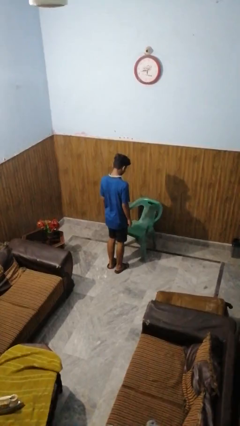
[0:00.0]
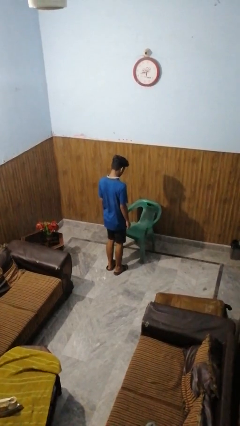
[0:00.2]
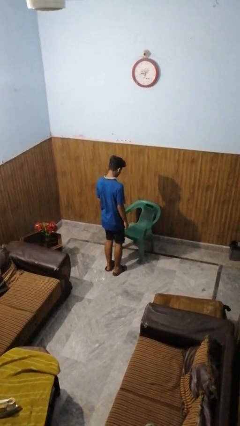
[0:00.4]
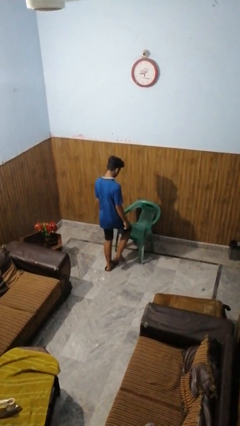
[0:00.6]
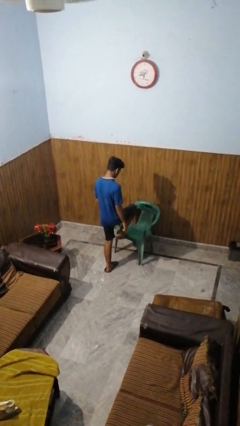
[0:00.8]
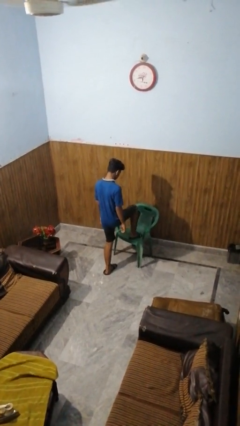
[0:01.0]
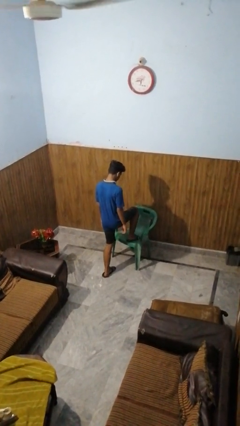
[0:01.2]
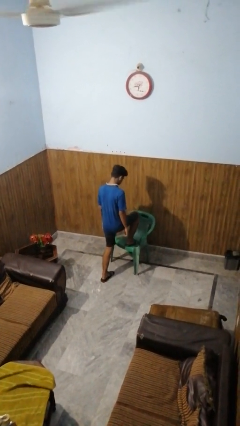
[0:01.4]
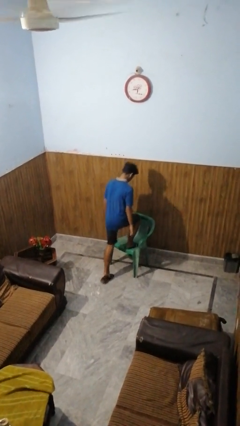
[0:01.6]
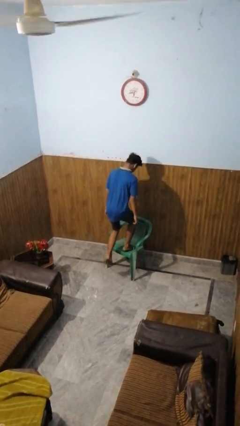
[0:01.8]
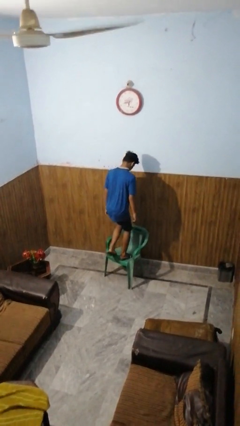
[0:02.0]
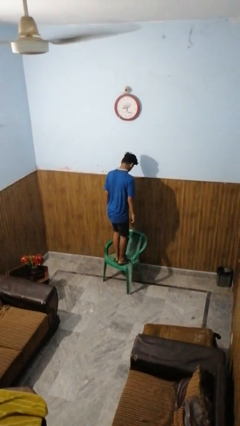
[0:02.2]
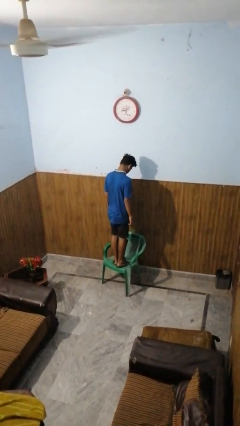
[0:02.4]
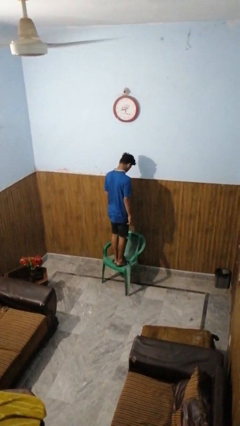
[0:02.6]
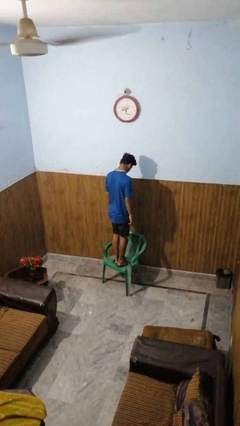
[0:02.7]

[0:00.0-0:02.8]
person climbs on chair

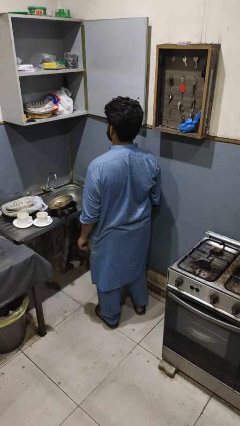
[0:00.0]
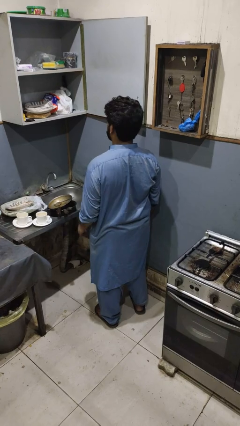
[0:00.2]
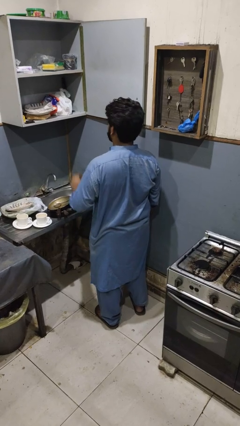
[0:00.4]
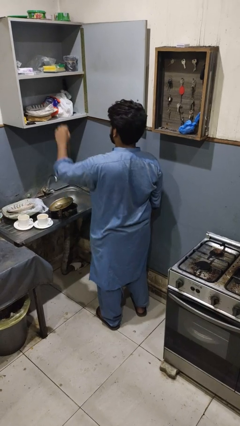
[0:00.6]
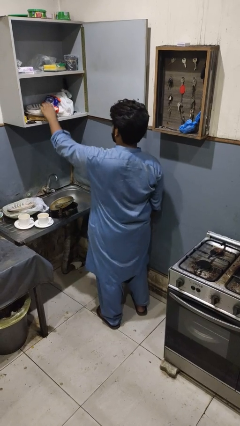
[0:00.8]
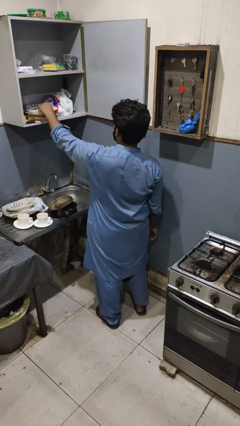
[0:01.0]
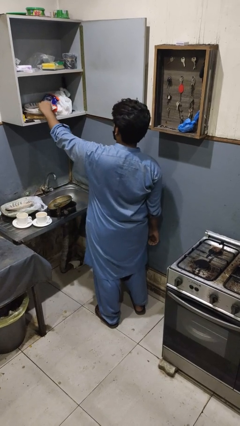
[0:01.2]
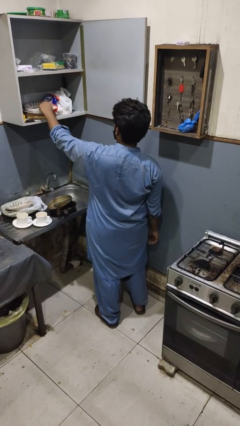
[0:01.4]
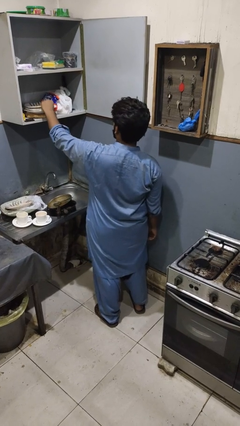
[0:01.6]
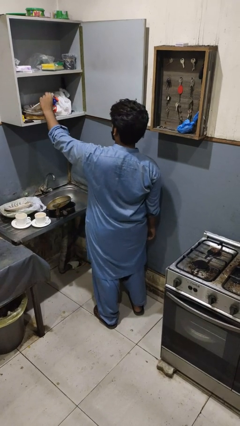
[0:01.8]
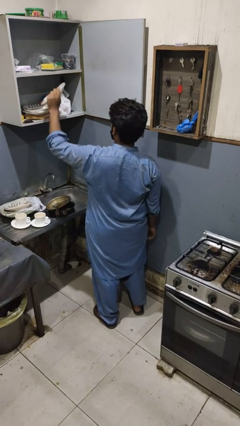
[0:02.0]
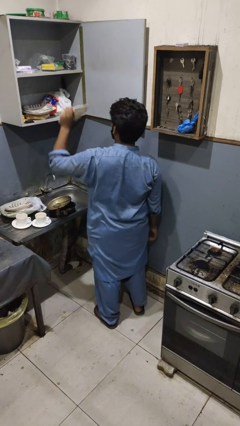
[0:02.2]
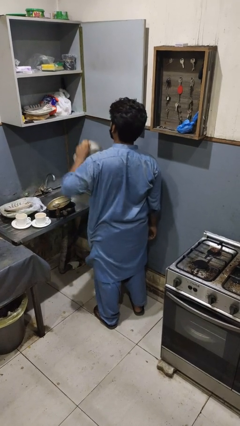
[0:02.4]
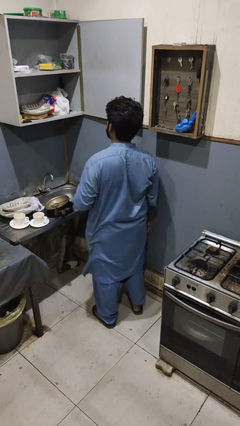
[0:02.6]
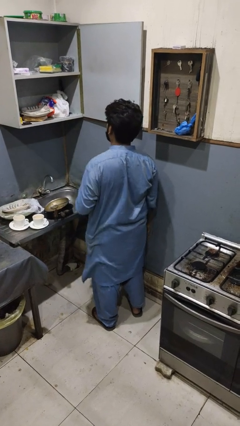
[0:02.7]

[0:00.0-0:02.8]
person takes object from cabinet

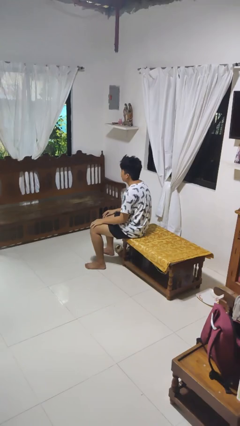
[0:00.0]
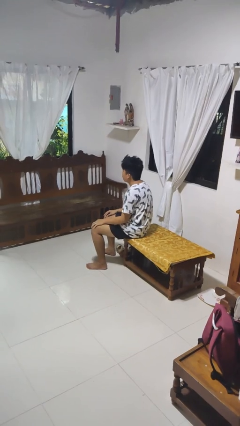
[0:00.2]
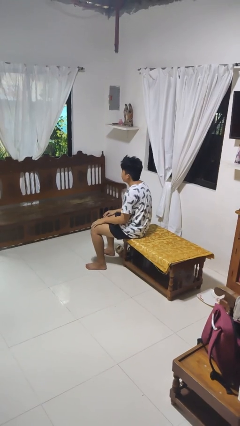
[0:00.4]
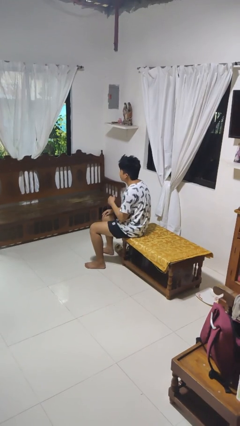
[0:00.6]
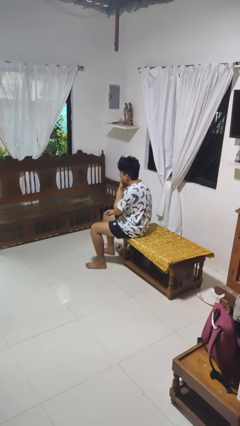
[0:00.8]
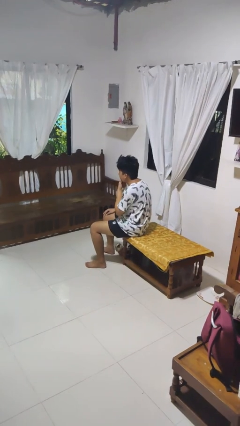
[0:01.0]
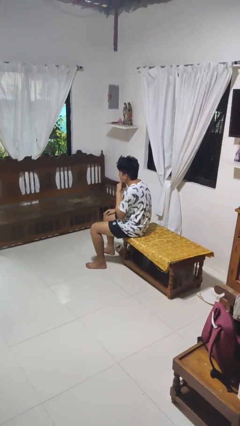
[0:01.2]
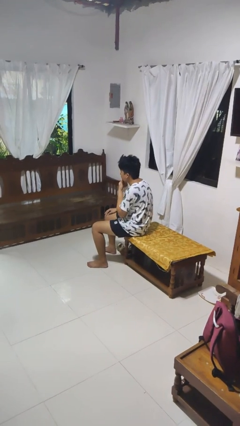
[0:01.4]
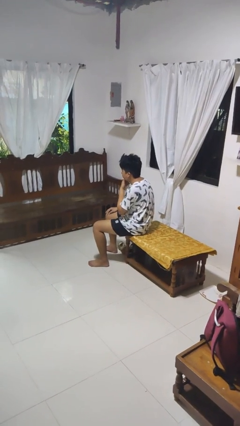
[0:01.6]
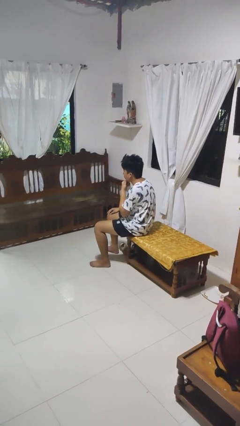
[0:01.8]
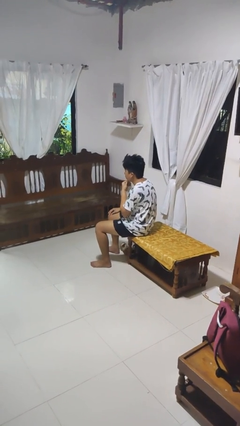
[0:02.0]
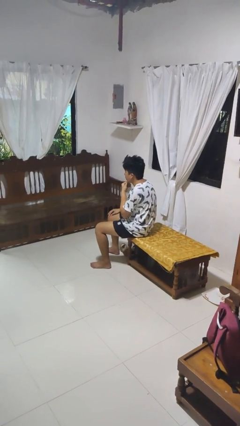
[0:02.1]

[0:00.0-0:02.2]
person strokes chin

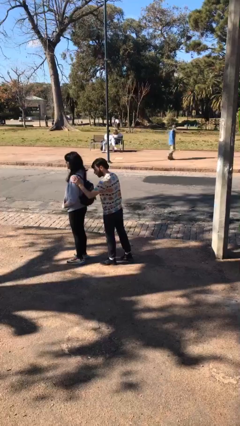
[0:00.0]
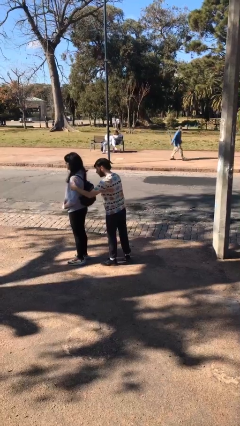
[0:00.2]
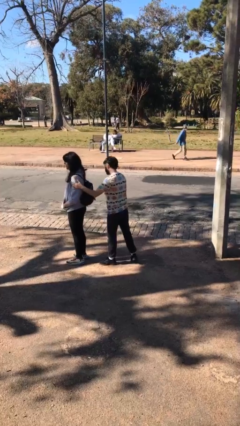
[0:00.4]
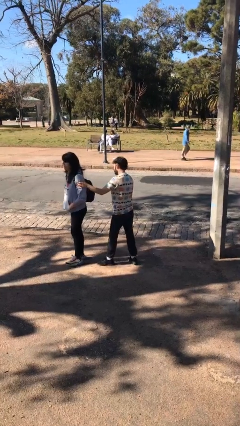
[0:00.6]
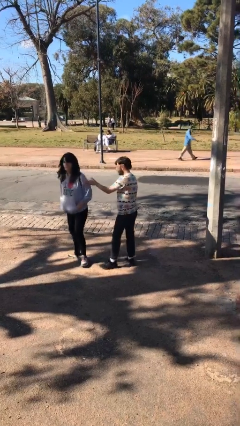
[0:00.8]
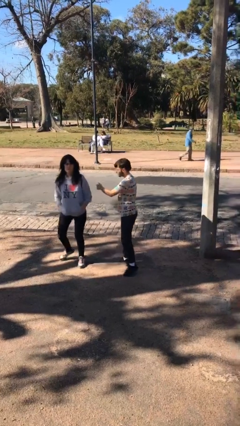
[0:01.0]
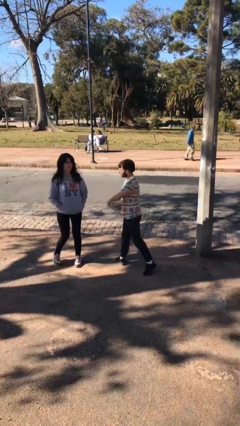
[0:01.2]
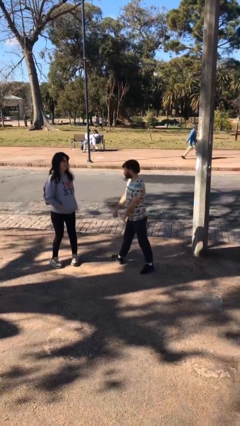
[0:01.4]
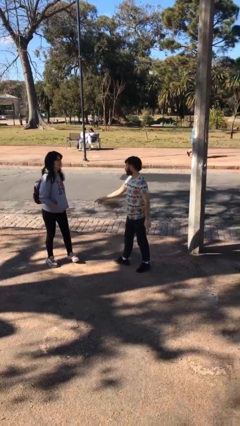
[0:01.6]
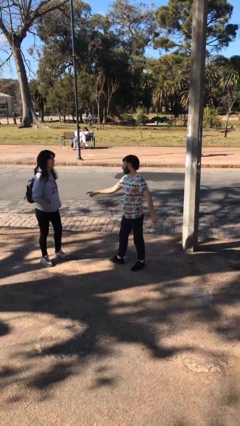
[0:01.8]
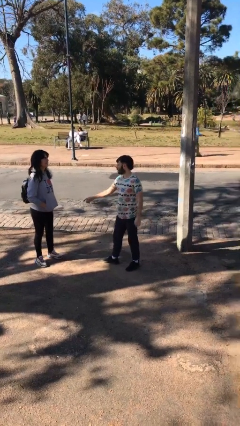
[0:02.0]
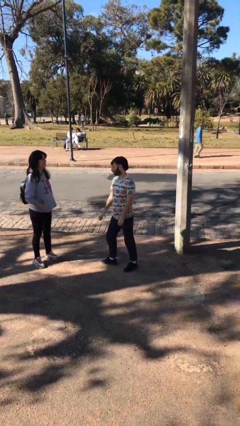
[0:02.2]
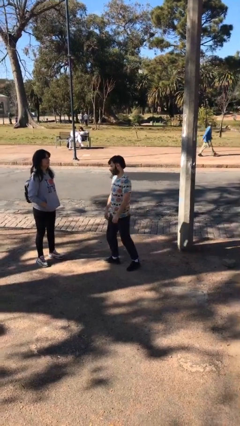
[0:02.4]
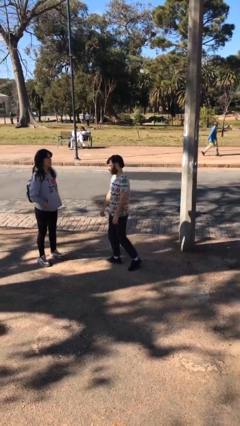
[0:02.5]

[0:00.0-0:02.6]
person spins person around

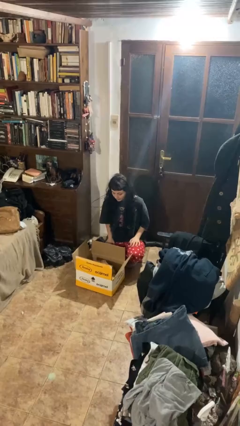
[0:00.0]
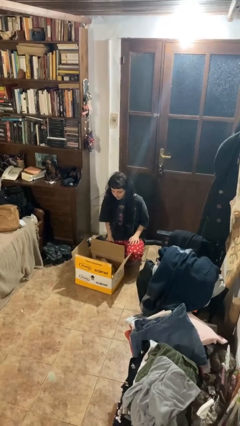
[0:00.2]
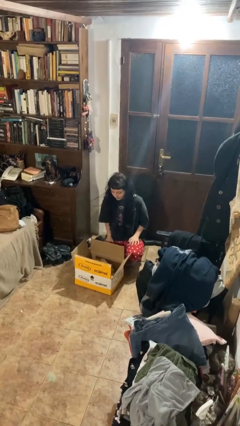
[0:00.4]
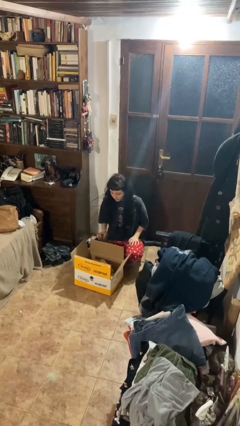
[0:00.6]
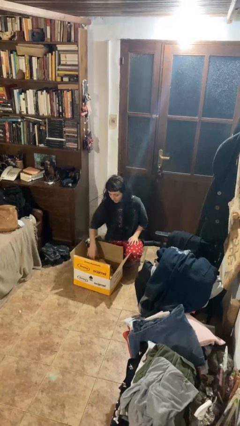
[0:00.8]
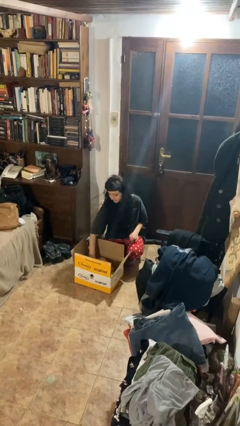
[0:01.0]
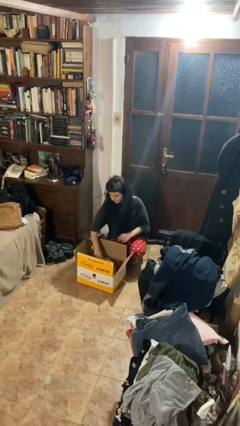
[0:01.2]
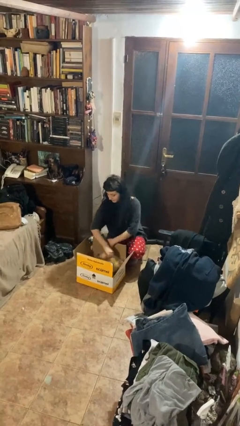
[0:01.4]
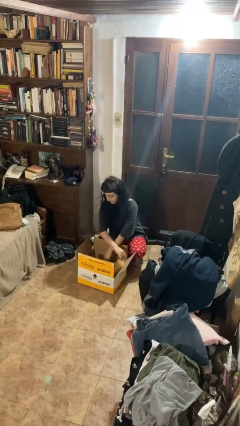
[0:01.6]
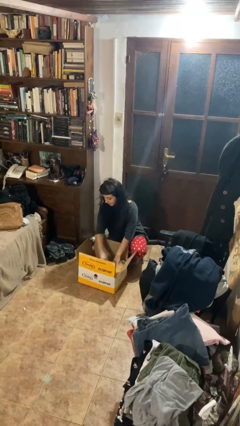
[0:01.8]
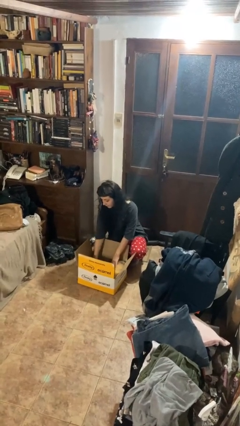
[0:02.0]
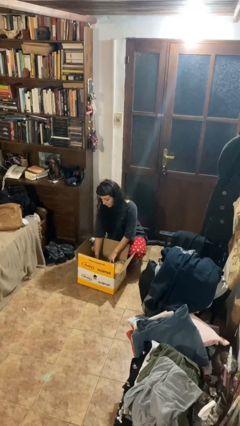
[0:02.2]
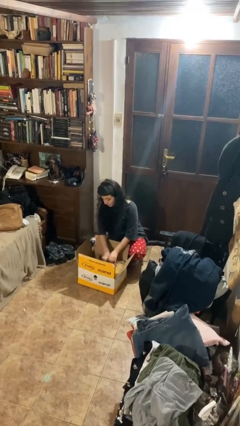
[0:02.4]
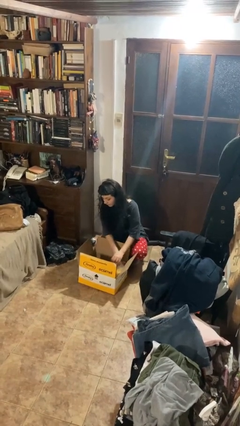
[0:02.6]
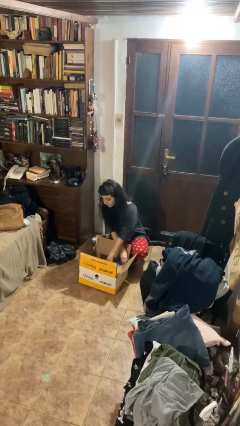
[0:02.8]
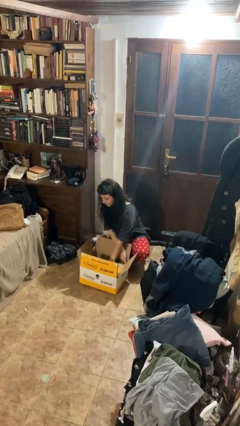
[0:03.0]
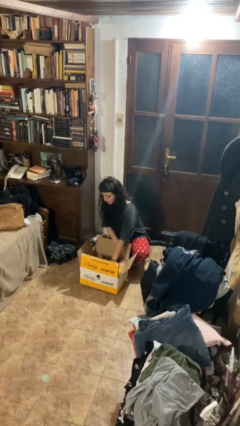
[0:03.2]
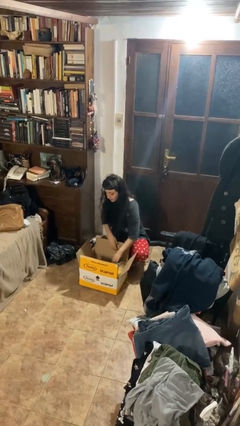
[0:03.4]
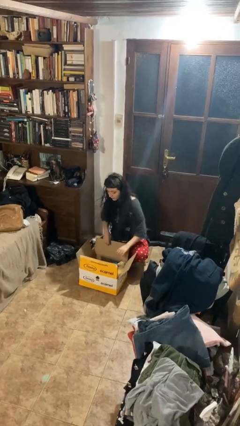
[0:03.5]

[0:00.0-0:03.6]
person searches in box

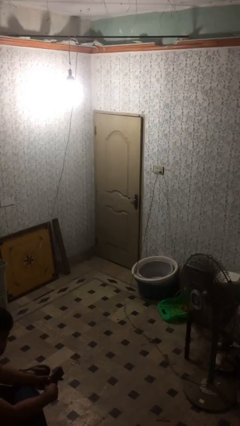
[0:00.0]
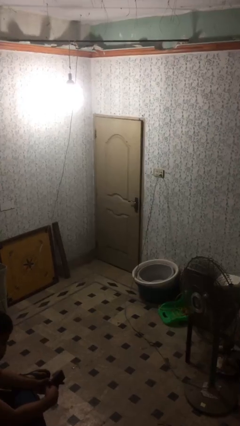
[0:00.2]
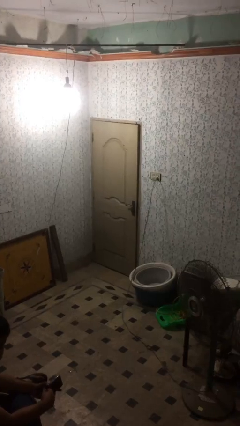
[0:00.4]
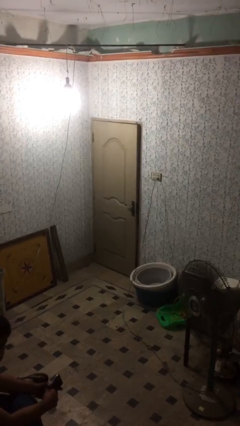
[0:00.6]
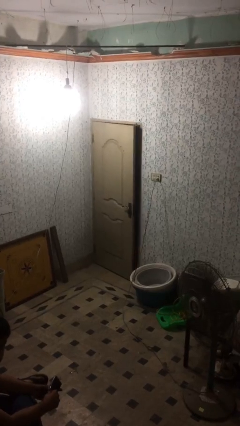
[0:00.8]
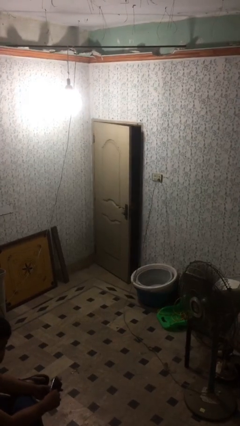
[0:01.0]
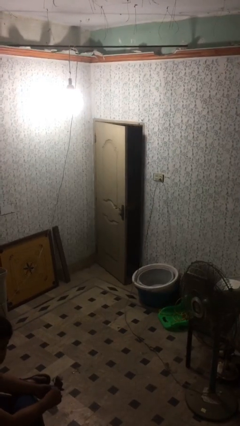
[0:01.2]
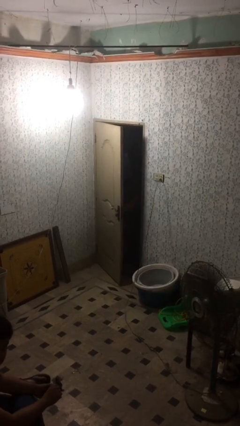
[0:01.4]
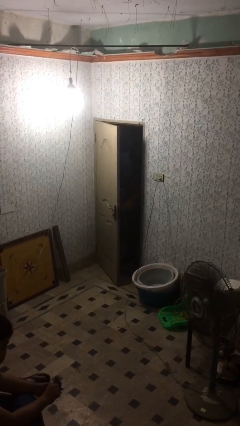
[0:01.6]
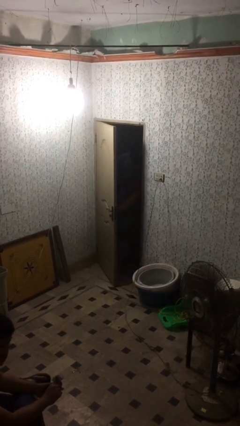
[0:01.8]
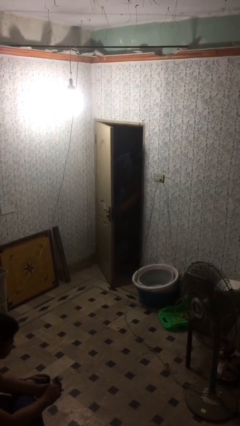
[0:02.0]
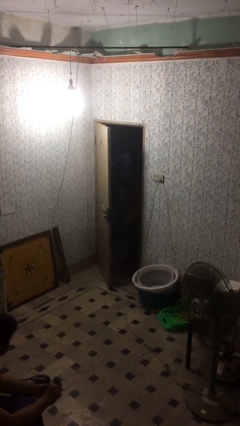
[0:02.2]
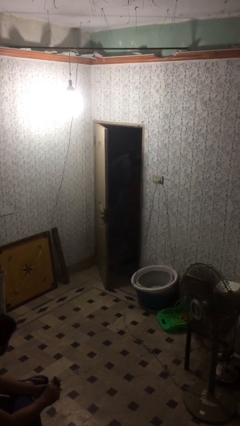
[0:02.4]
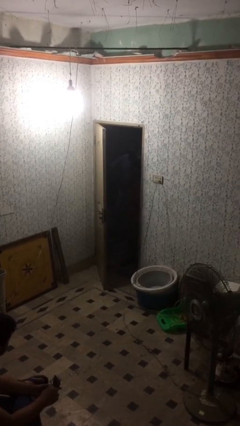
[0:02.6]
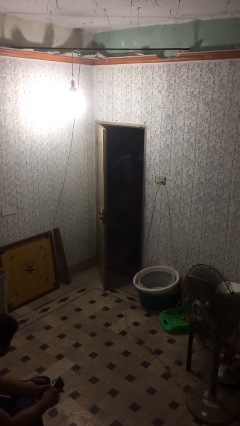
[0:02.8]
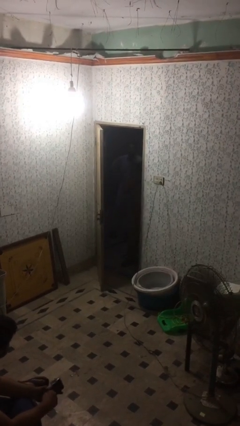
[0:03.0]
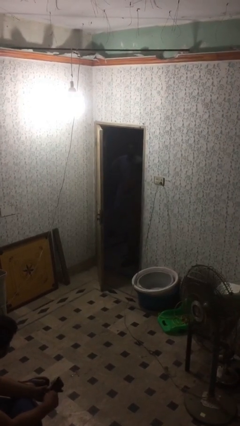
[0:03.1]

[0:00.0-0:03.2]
person opens facility door

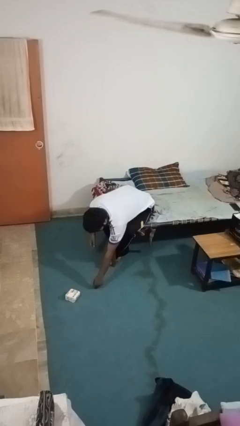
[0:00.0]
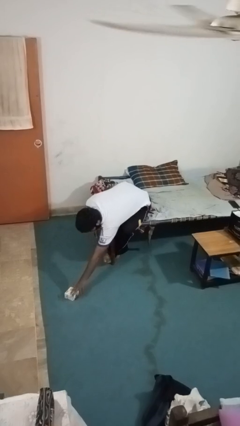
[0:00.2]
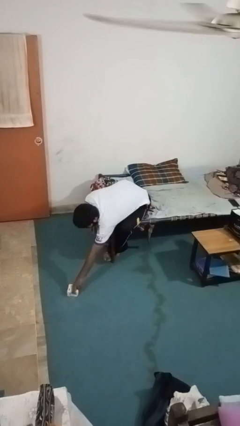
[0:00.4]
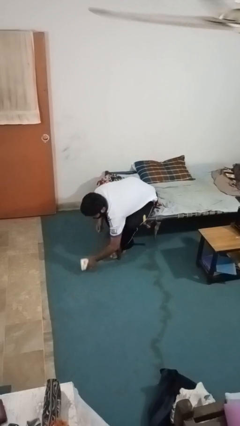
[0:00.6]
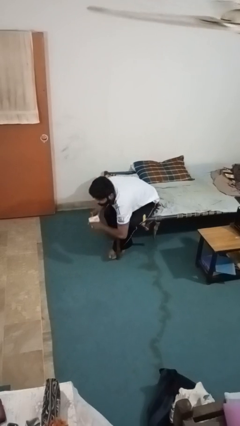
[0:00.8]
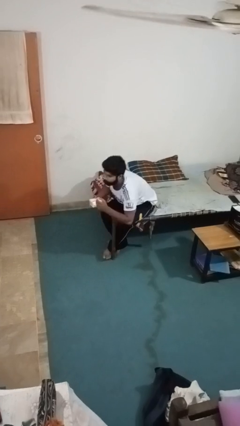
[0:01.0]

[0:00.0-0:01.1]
person picks up object from floor
